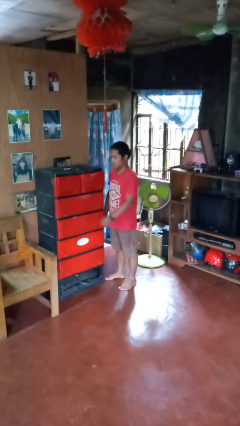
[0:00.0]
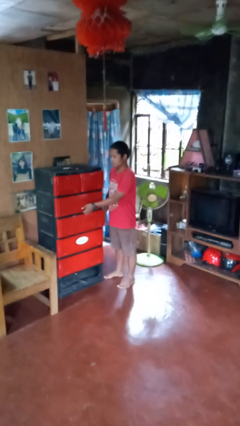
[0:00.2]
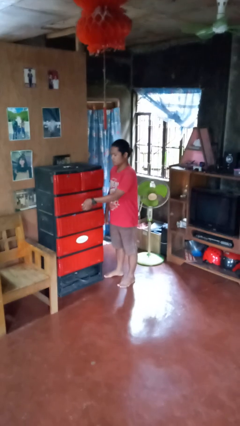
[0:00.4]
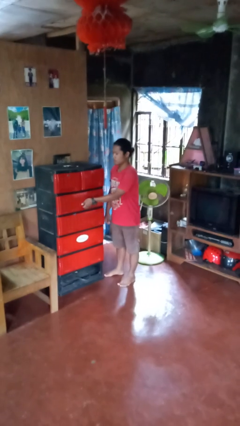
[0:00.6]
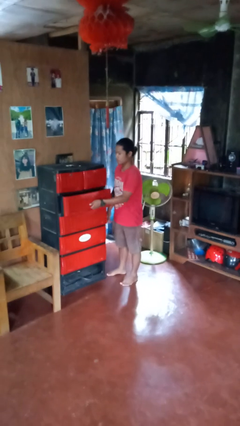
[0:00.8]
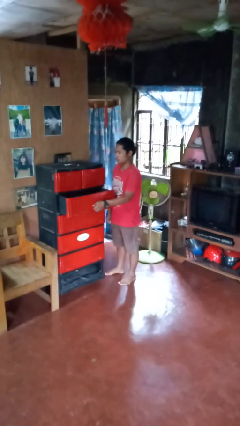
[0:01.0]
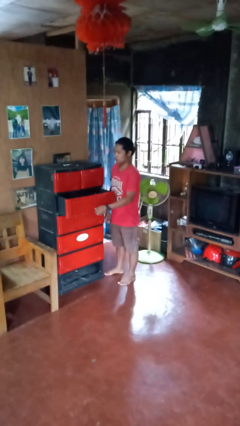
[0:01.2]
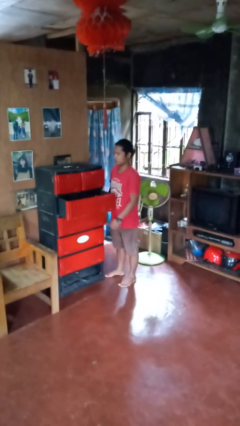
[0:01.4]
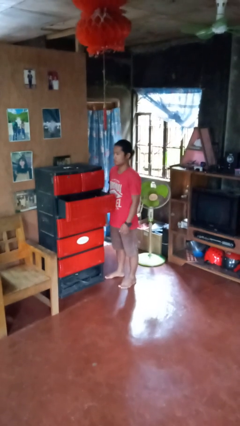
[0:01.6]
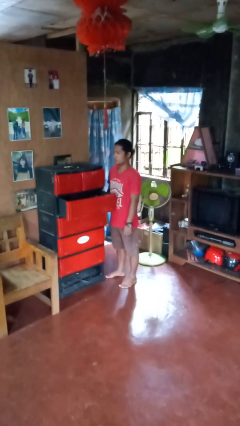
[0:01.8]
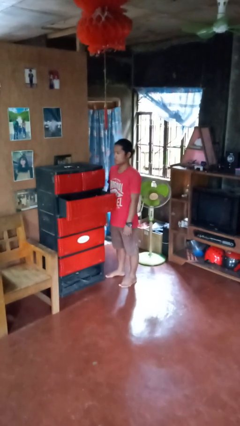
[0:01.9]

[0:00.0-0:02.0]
person opens dresser drawer

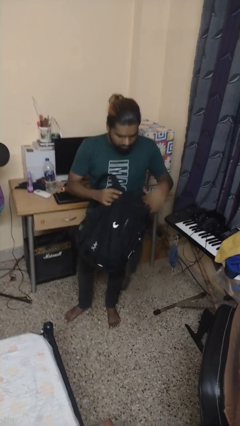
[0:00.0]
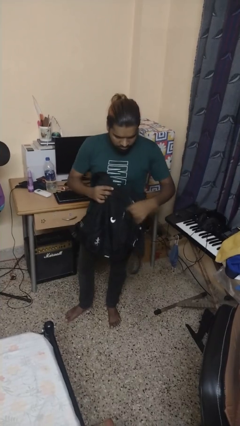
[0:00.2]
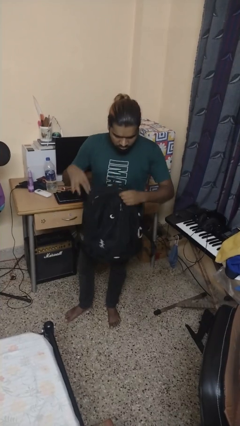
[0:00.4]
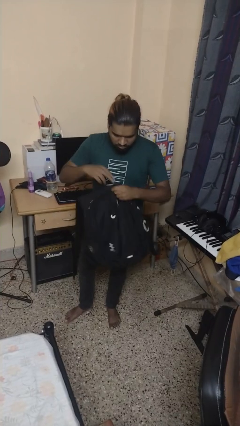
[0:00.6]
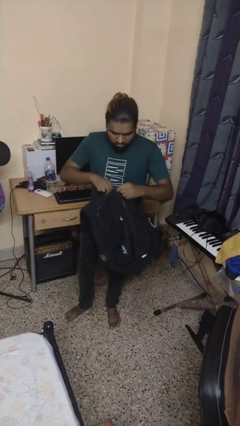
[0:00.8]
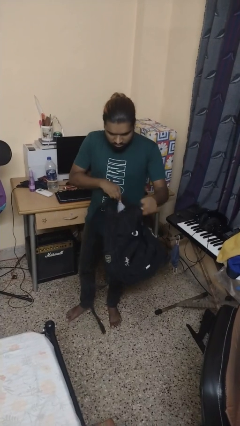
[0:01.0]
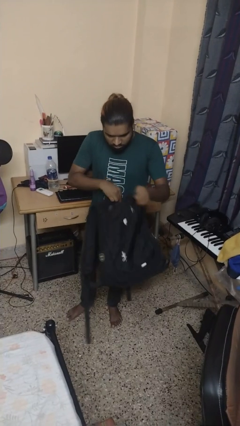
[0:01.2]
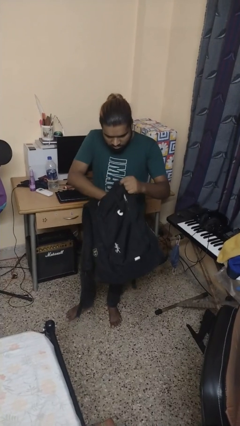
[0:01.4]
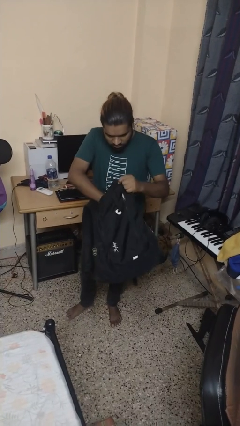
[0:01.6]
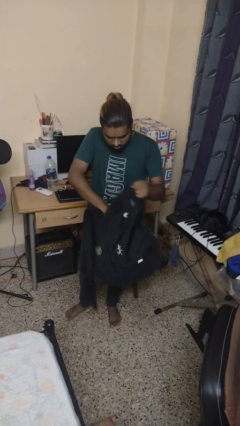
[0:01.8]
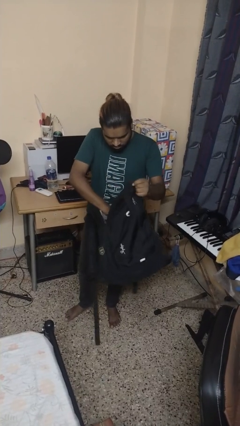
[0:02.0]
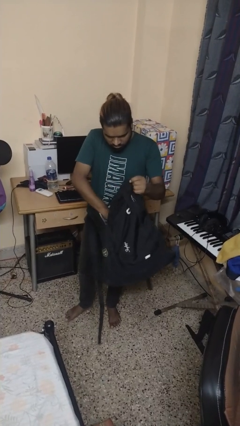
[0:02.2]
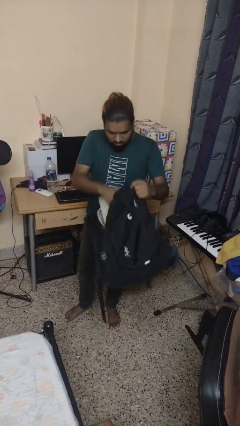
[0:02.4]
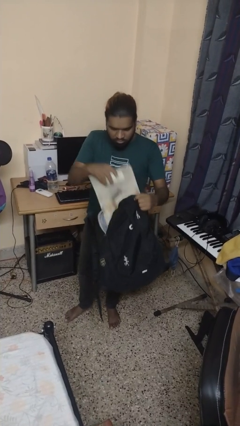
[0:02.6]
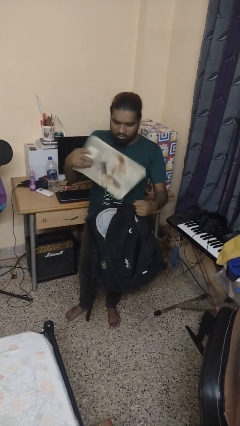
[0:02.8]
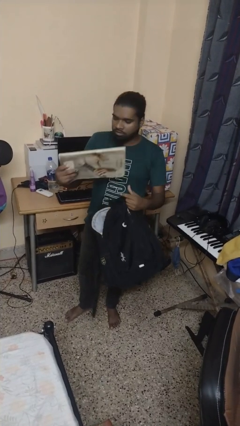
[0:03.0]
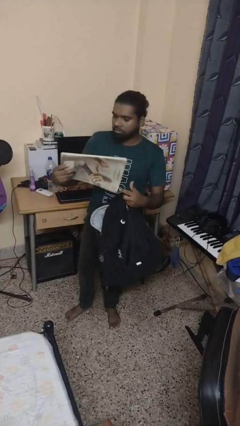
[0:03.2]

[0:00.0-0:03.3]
person searches in backpack

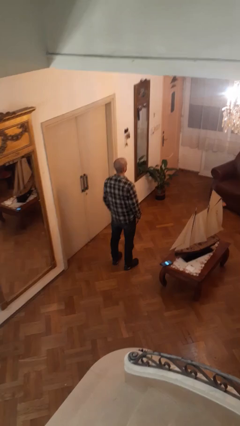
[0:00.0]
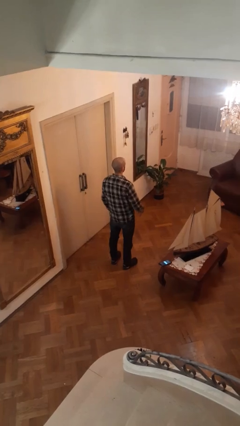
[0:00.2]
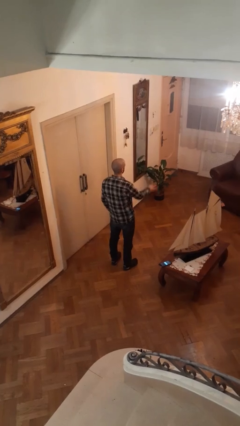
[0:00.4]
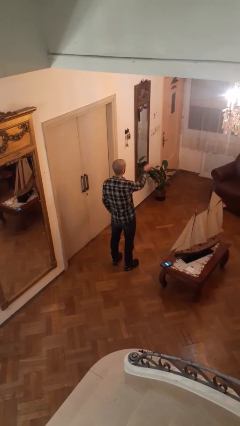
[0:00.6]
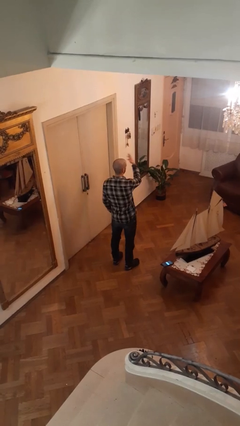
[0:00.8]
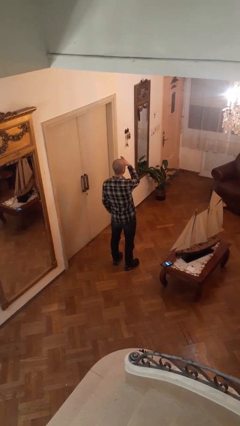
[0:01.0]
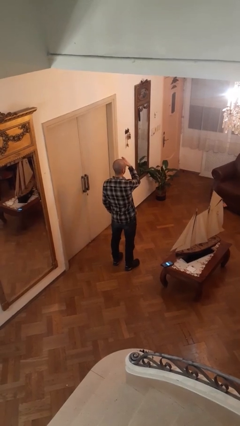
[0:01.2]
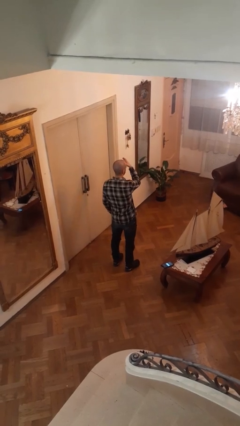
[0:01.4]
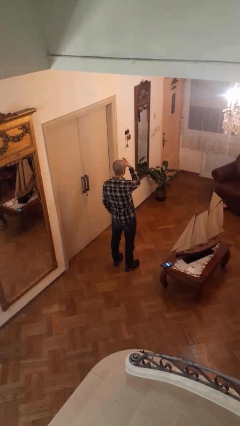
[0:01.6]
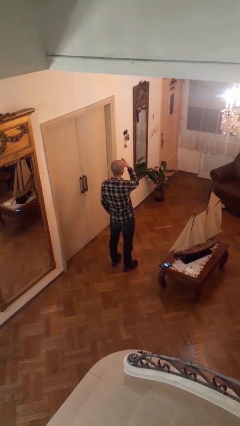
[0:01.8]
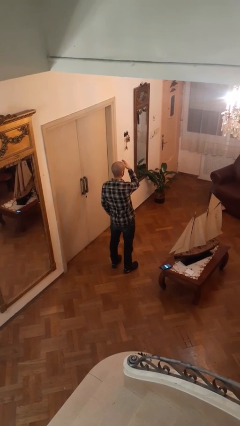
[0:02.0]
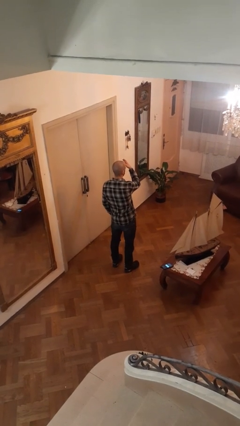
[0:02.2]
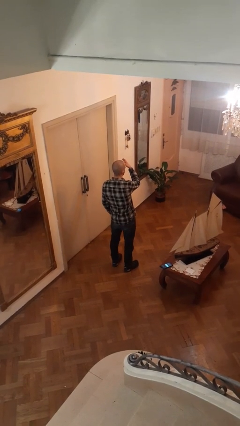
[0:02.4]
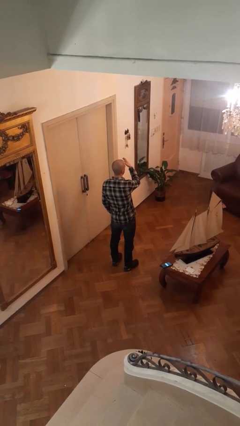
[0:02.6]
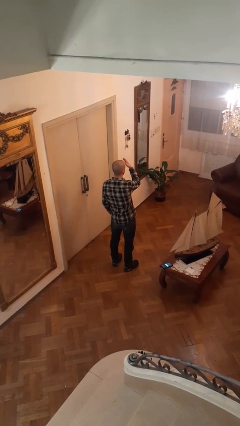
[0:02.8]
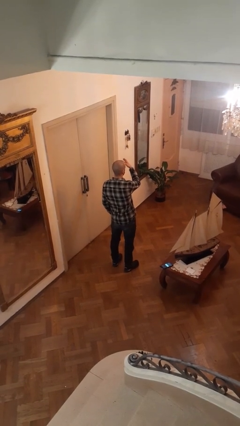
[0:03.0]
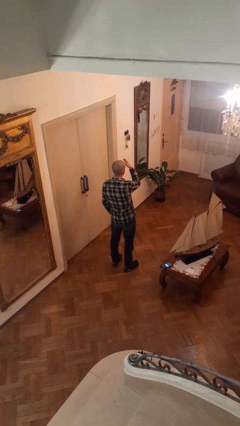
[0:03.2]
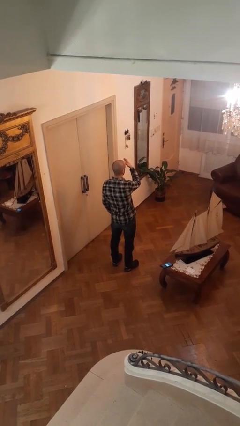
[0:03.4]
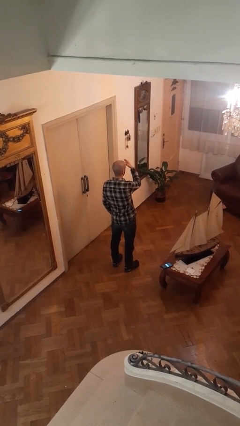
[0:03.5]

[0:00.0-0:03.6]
person gestures swipe left

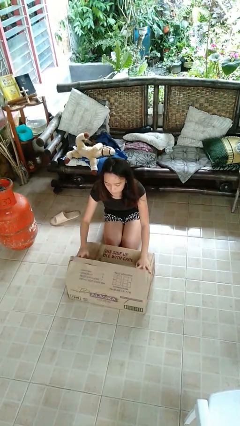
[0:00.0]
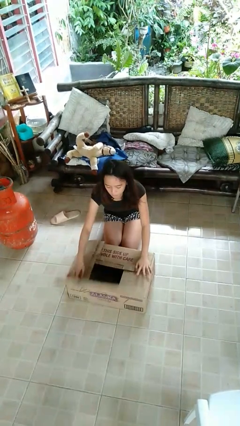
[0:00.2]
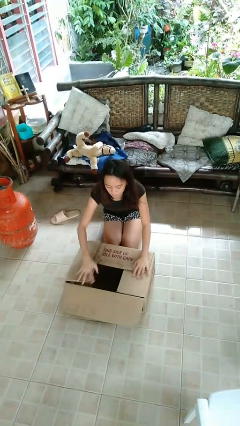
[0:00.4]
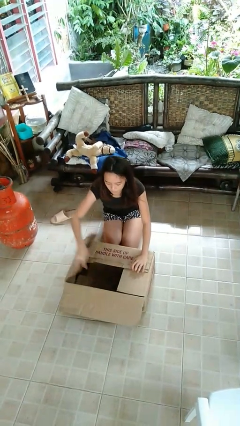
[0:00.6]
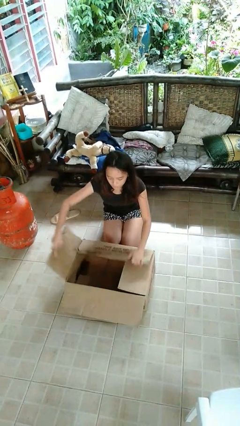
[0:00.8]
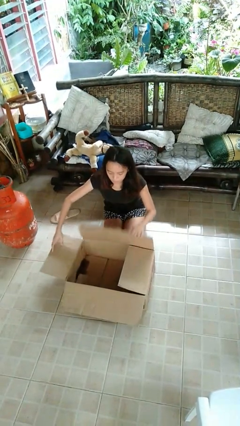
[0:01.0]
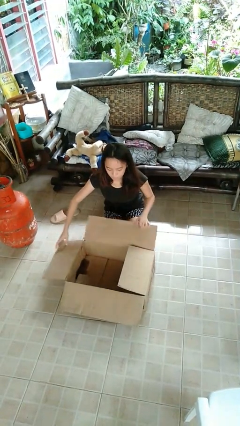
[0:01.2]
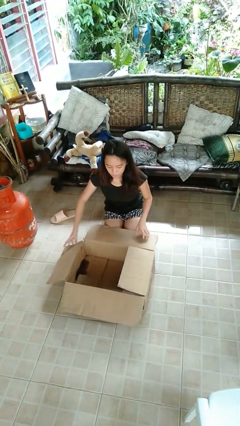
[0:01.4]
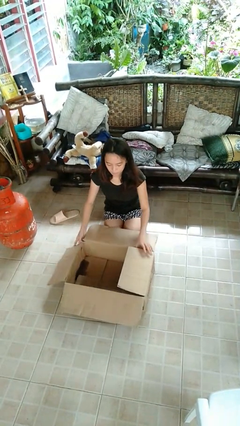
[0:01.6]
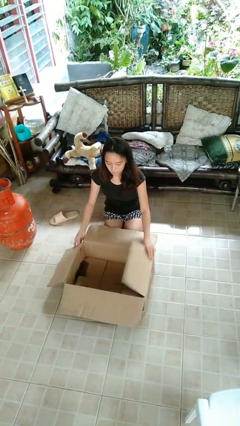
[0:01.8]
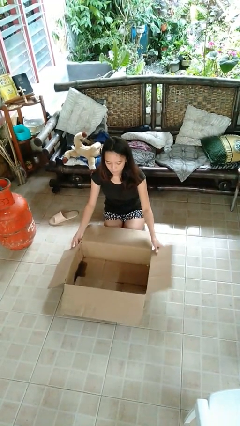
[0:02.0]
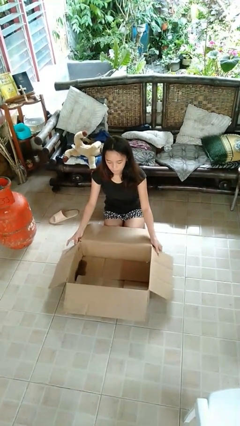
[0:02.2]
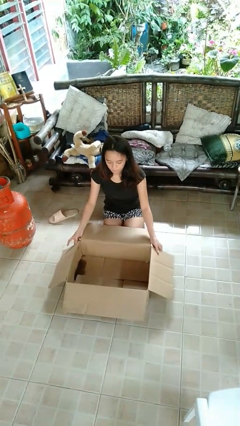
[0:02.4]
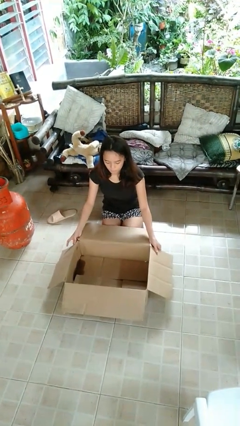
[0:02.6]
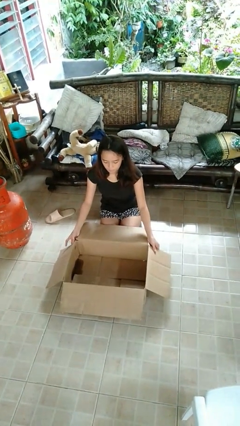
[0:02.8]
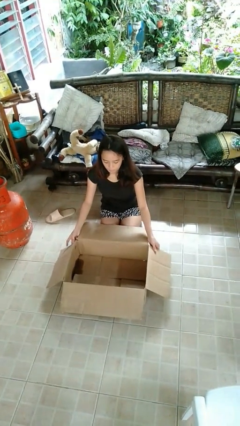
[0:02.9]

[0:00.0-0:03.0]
person opens box

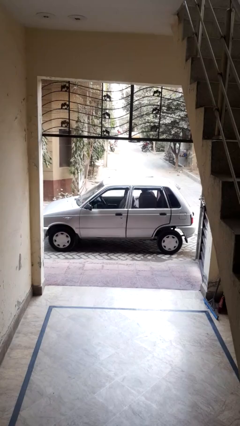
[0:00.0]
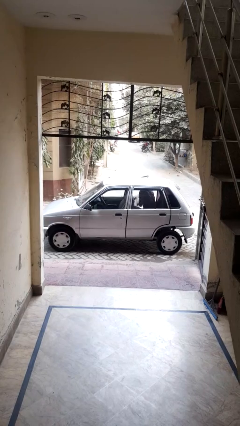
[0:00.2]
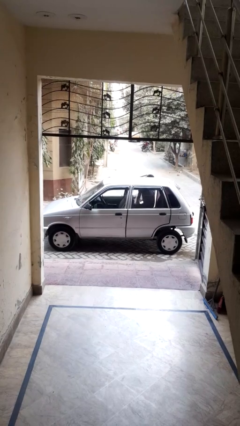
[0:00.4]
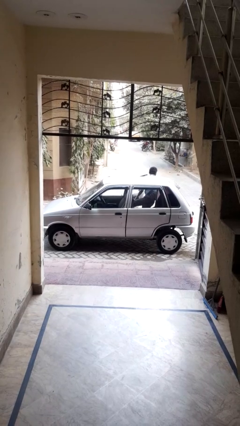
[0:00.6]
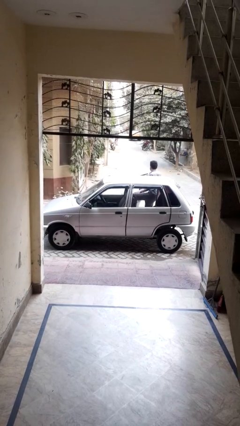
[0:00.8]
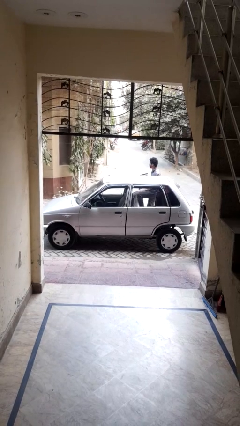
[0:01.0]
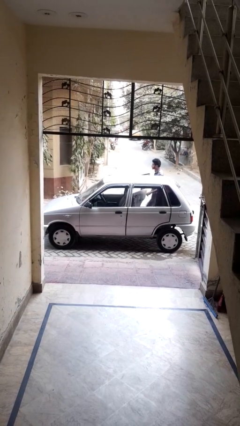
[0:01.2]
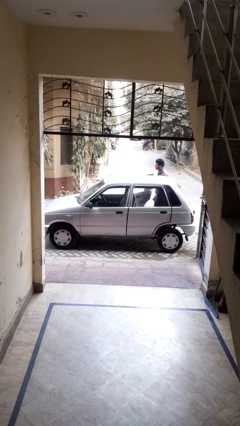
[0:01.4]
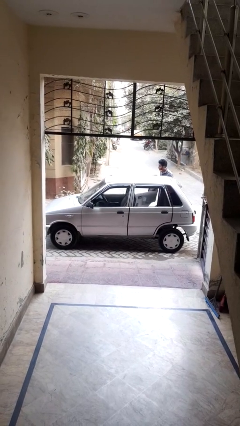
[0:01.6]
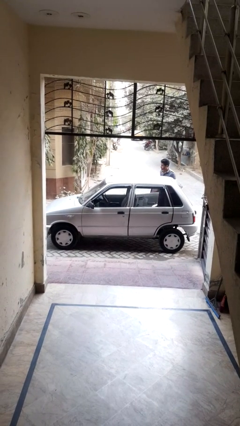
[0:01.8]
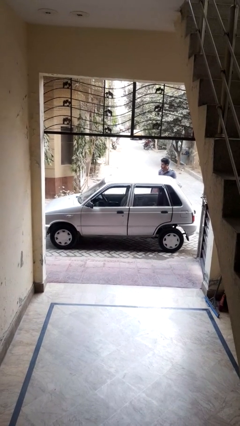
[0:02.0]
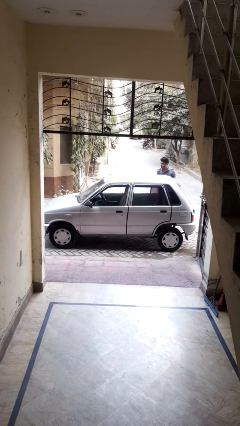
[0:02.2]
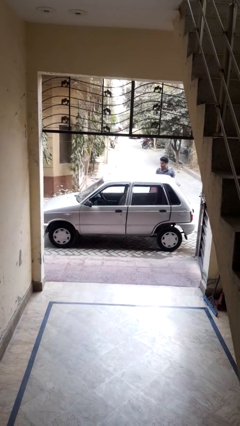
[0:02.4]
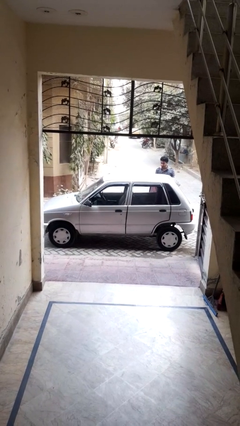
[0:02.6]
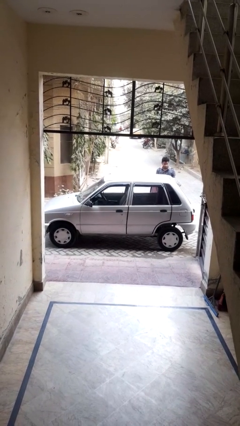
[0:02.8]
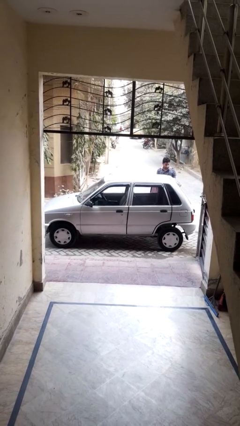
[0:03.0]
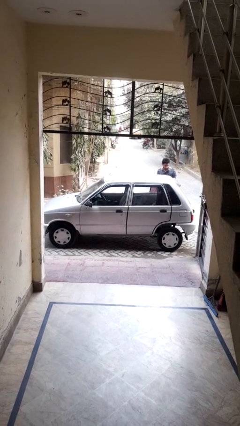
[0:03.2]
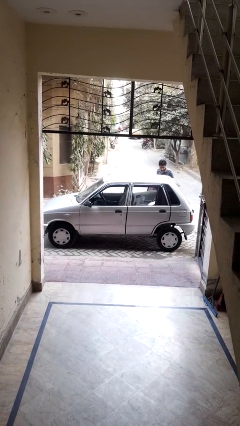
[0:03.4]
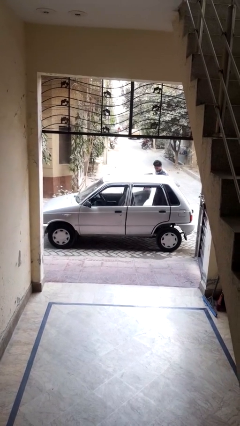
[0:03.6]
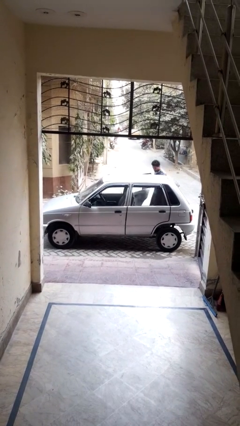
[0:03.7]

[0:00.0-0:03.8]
car drops off person

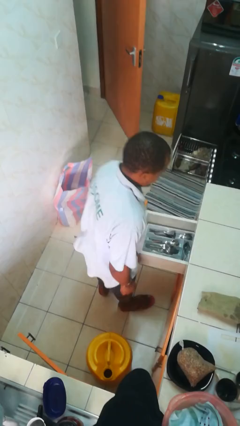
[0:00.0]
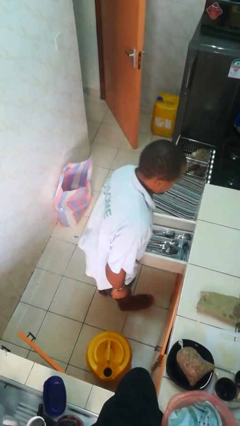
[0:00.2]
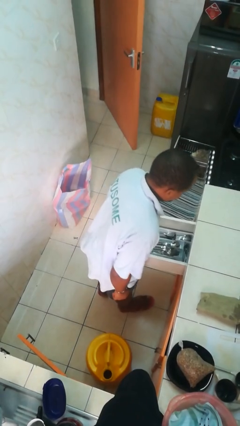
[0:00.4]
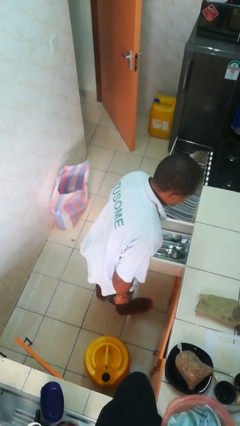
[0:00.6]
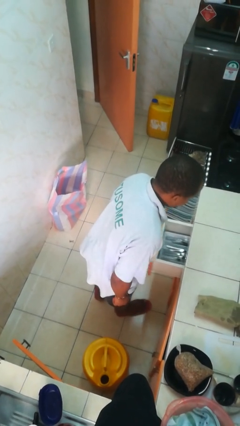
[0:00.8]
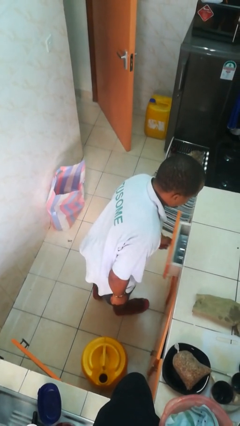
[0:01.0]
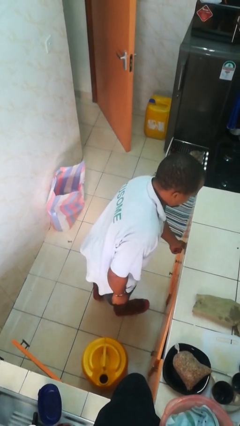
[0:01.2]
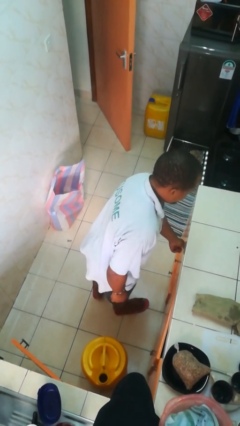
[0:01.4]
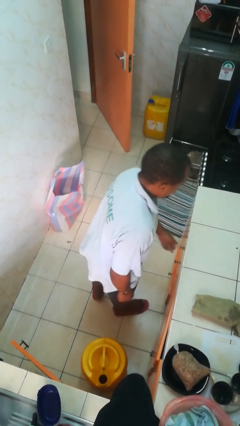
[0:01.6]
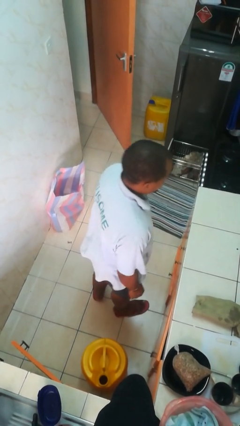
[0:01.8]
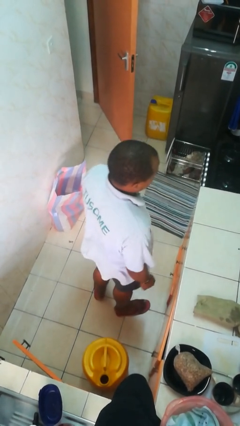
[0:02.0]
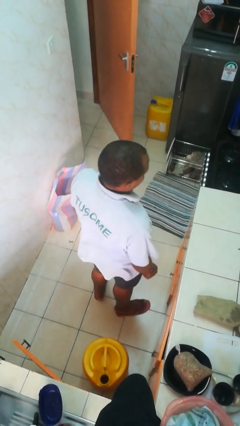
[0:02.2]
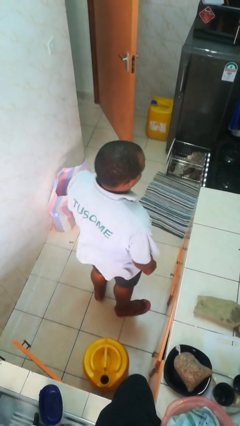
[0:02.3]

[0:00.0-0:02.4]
person closes kitchen drawer
